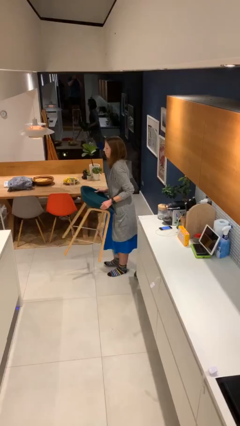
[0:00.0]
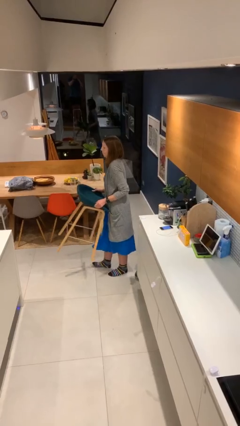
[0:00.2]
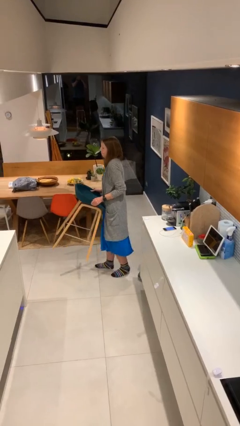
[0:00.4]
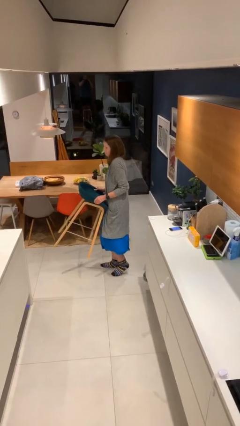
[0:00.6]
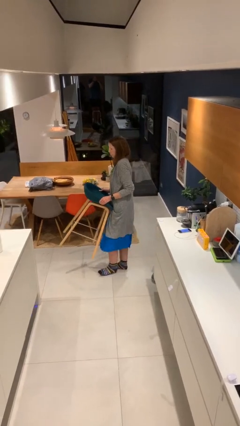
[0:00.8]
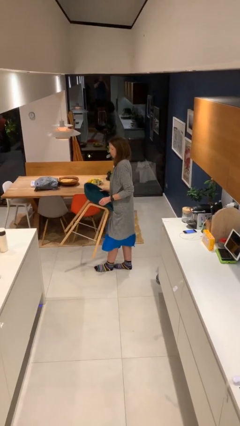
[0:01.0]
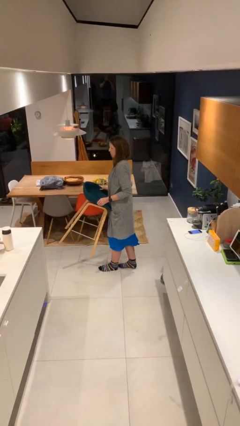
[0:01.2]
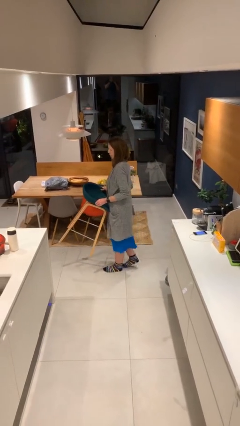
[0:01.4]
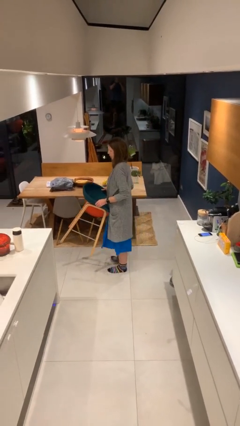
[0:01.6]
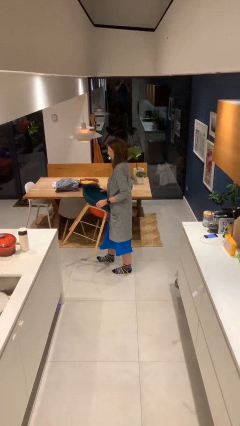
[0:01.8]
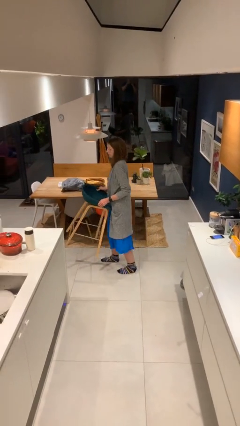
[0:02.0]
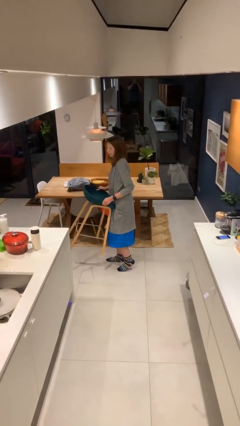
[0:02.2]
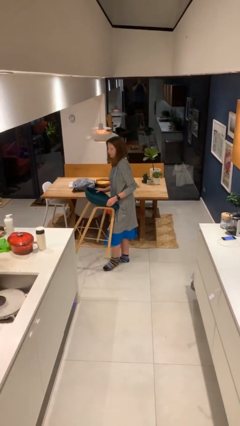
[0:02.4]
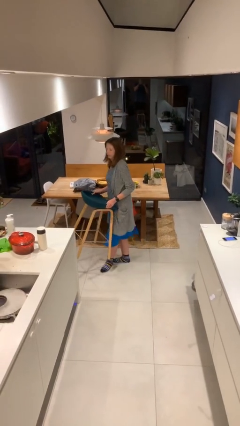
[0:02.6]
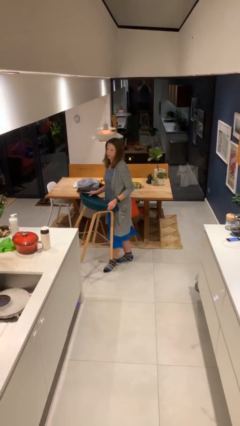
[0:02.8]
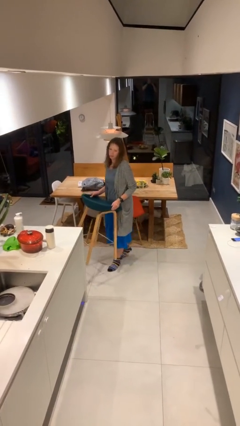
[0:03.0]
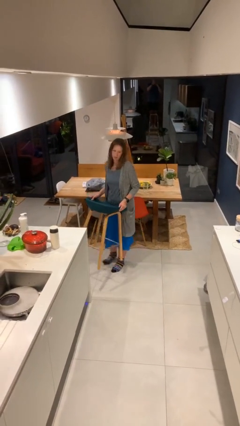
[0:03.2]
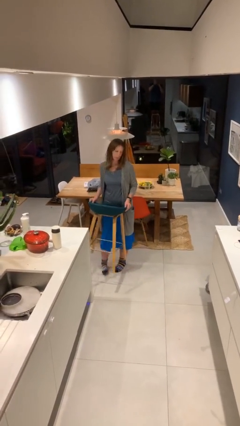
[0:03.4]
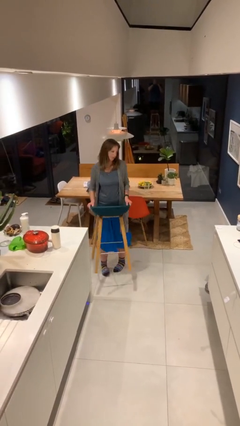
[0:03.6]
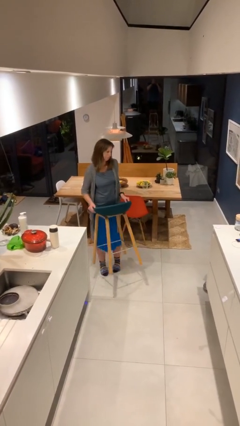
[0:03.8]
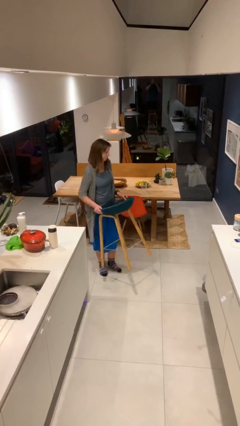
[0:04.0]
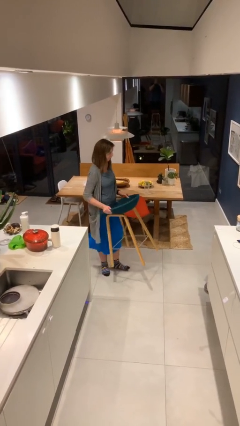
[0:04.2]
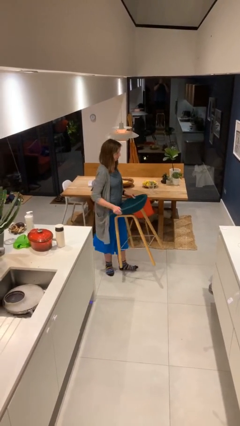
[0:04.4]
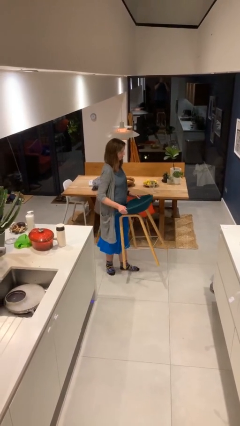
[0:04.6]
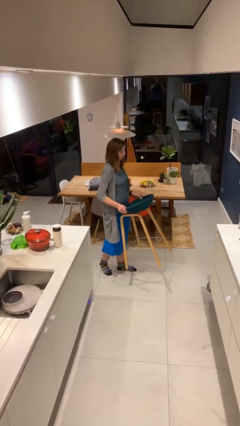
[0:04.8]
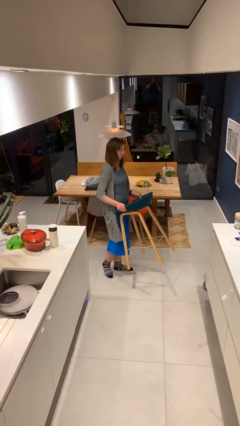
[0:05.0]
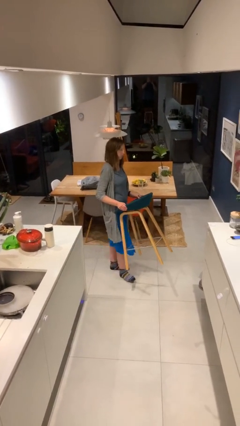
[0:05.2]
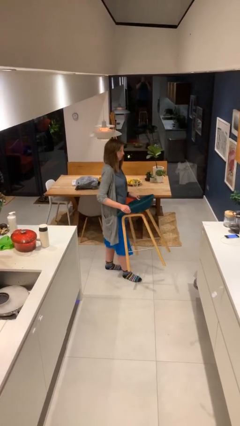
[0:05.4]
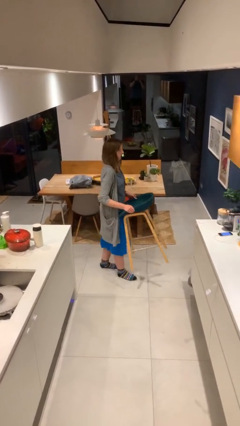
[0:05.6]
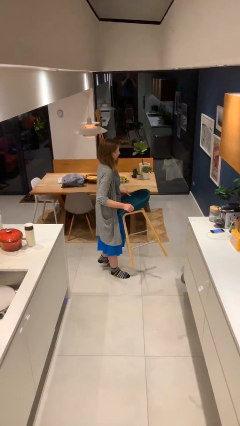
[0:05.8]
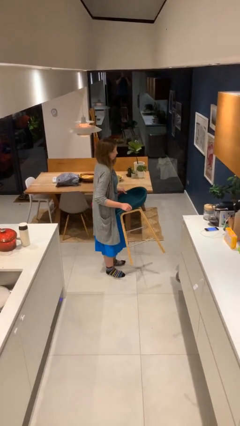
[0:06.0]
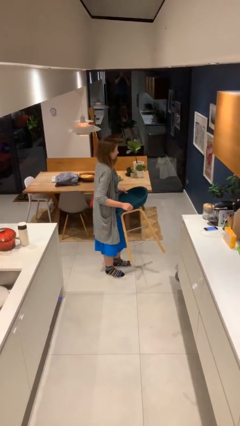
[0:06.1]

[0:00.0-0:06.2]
person carries heavy object

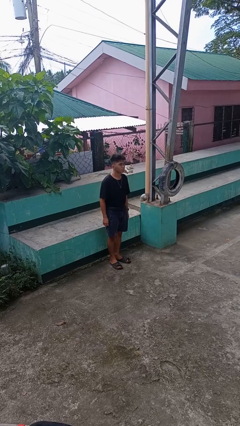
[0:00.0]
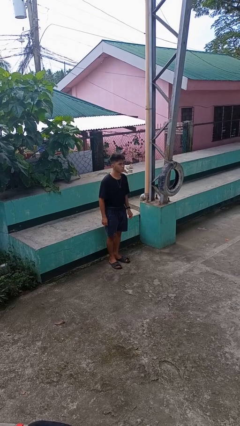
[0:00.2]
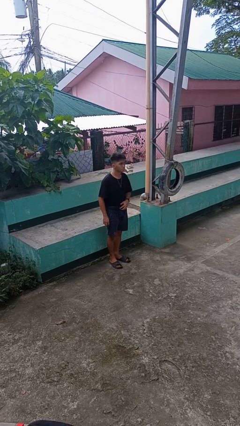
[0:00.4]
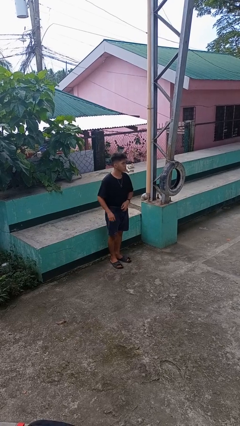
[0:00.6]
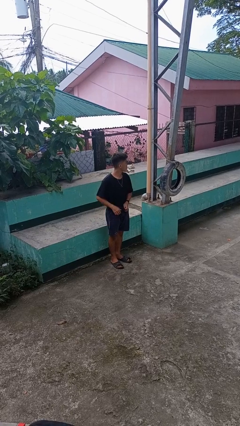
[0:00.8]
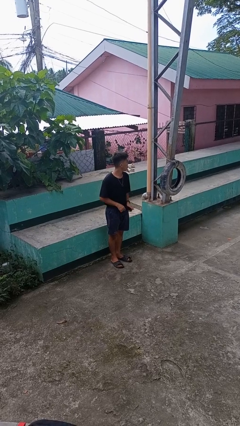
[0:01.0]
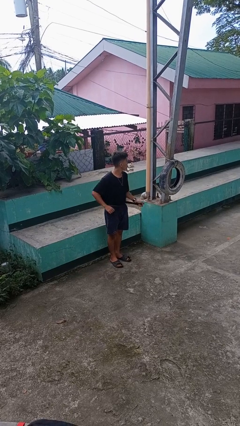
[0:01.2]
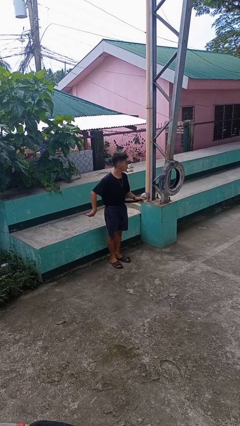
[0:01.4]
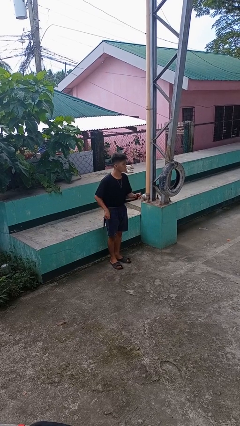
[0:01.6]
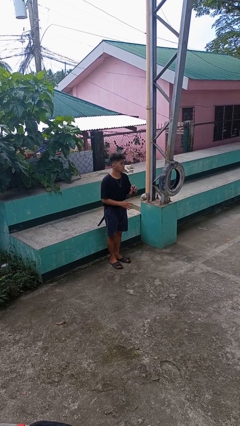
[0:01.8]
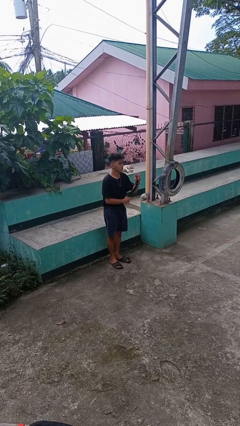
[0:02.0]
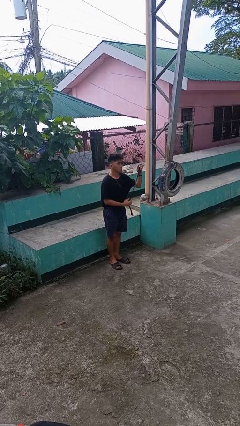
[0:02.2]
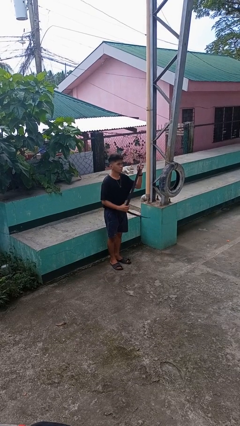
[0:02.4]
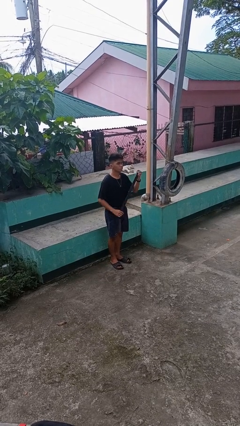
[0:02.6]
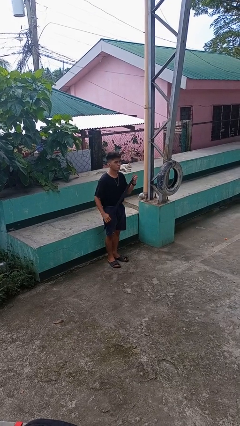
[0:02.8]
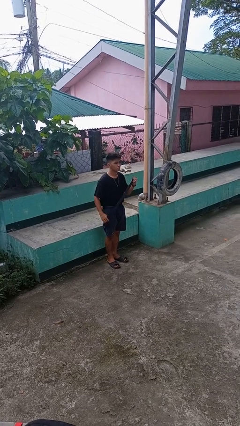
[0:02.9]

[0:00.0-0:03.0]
person takes off belt

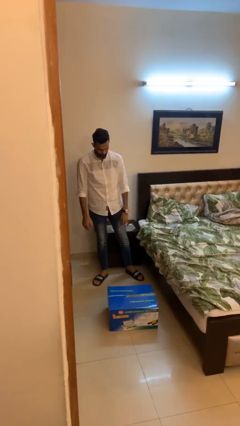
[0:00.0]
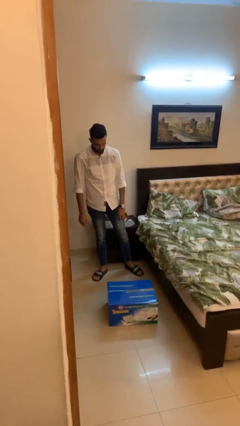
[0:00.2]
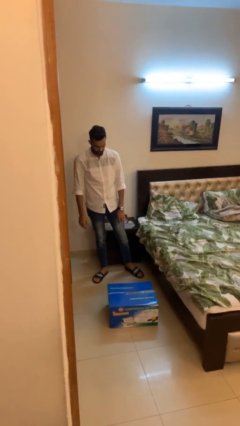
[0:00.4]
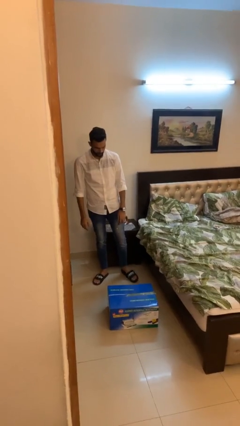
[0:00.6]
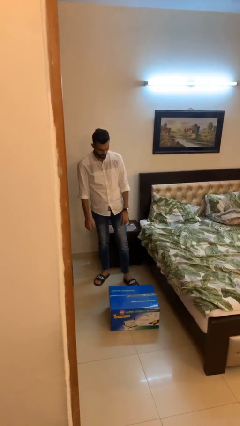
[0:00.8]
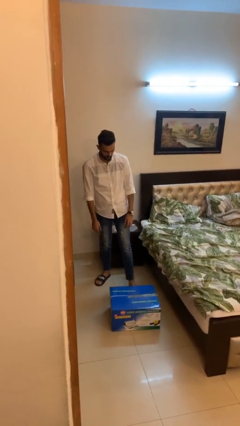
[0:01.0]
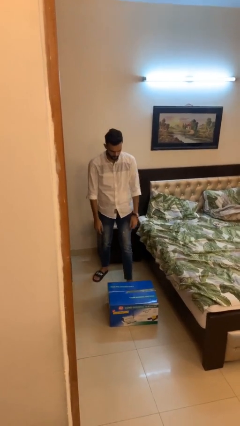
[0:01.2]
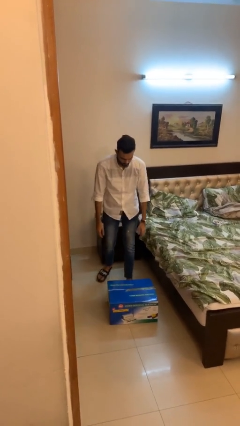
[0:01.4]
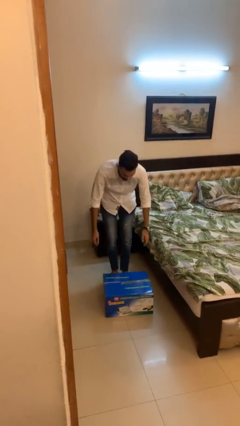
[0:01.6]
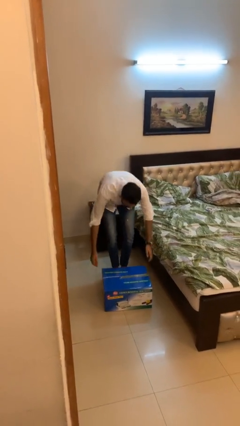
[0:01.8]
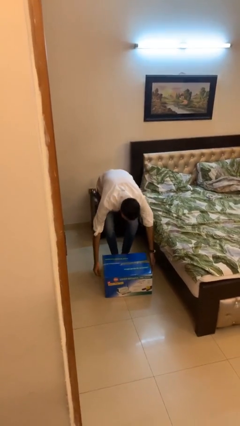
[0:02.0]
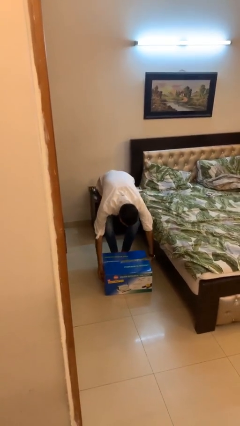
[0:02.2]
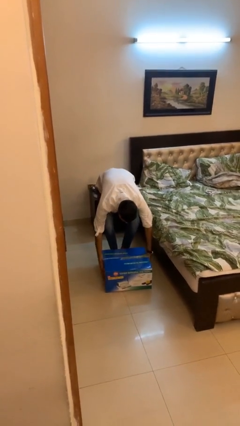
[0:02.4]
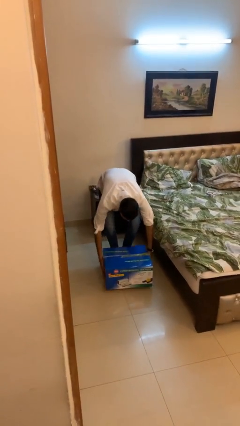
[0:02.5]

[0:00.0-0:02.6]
person picks up object from floor

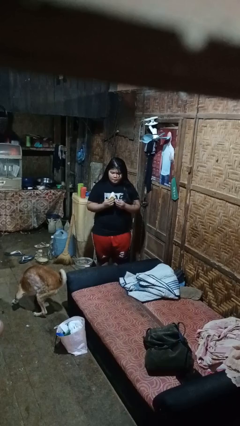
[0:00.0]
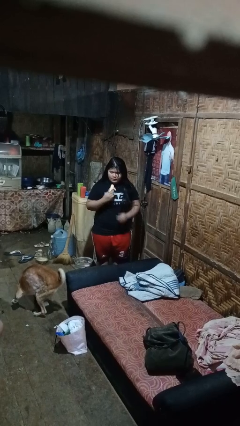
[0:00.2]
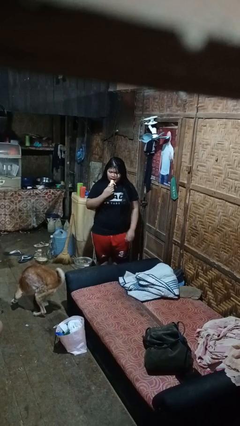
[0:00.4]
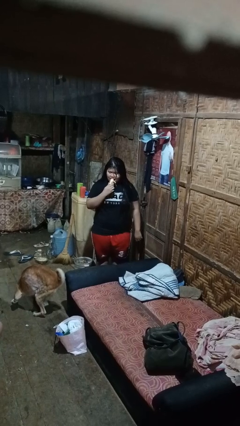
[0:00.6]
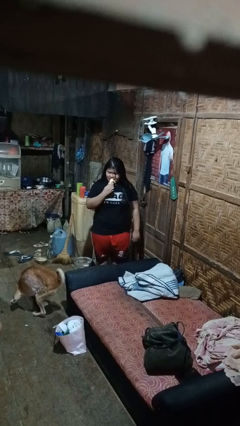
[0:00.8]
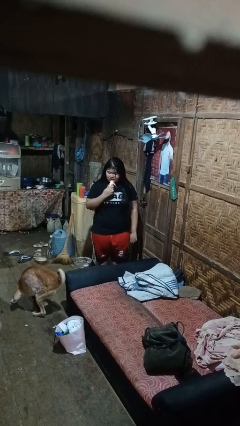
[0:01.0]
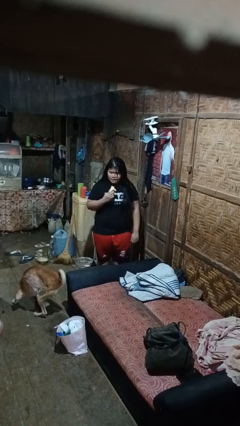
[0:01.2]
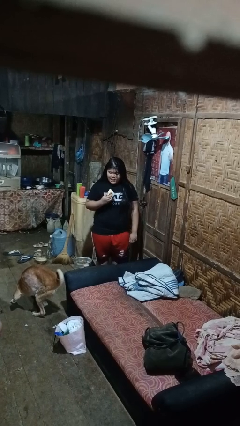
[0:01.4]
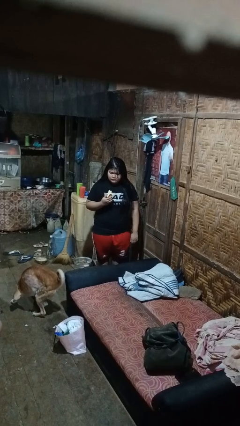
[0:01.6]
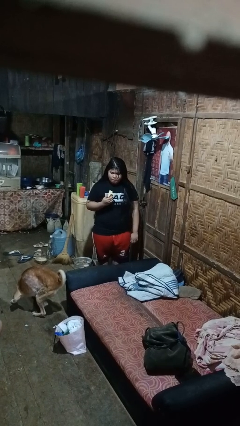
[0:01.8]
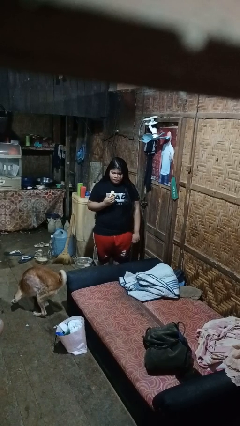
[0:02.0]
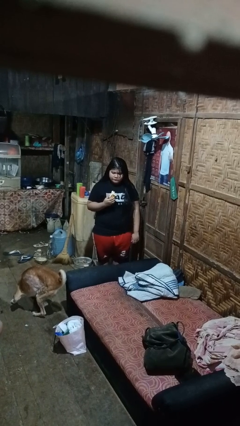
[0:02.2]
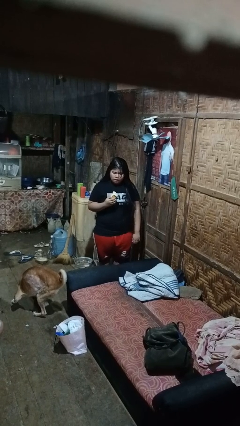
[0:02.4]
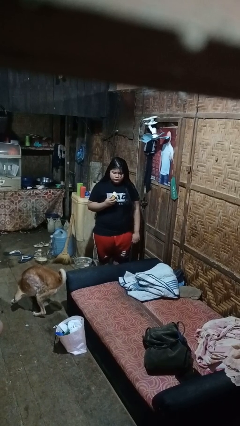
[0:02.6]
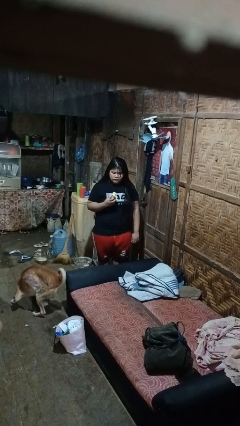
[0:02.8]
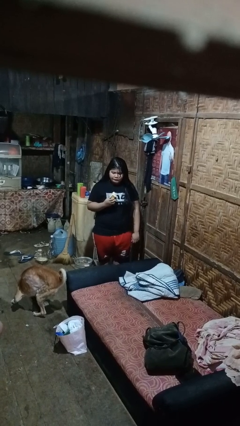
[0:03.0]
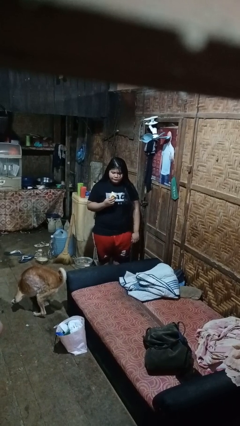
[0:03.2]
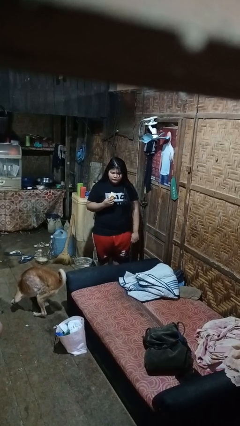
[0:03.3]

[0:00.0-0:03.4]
person eats banana

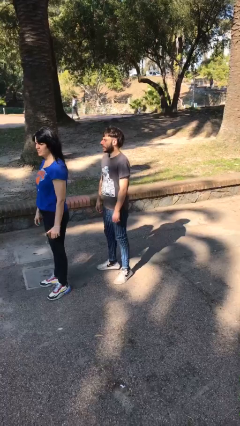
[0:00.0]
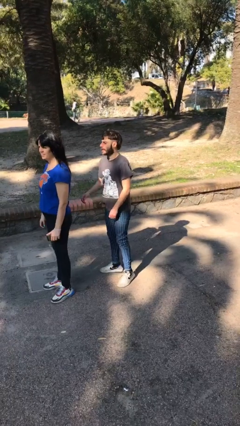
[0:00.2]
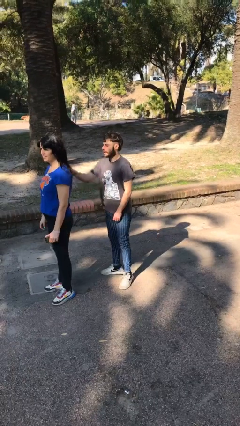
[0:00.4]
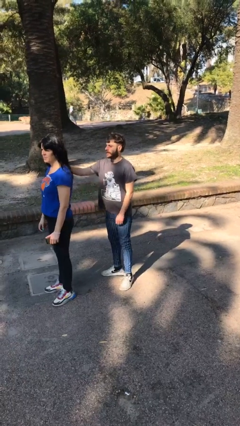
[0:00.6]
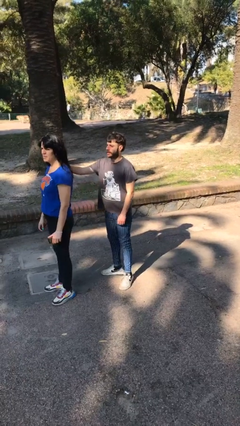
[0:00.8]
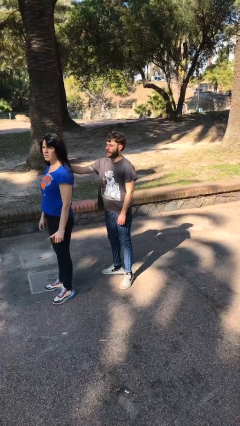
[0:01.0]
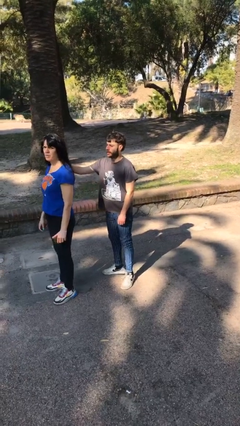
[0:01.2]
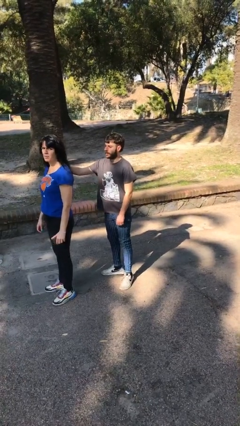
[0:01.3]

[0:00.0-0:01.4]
person grabs person by shoulder

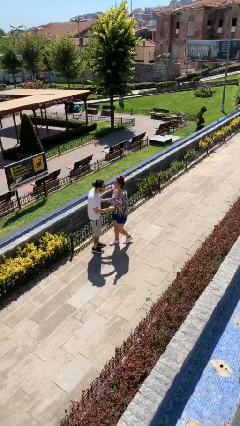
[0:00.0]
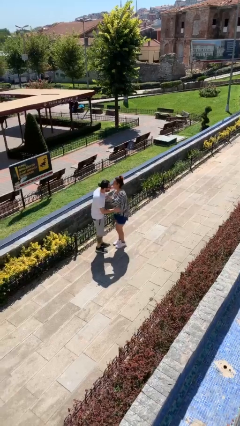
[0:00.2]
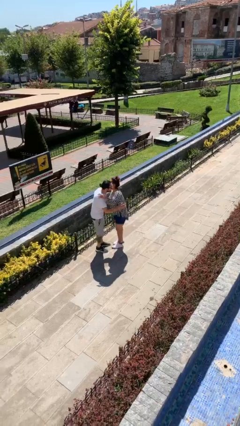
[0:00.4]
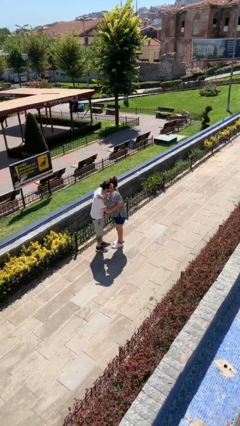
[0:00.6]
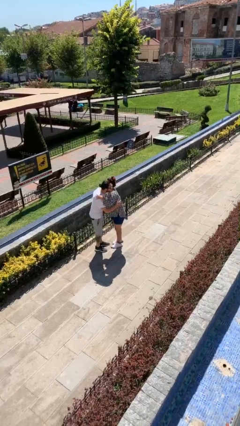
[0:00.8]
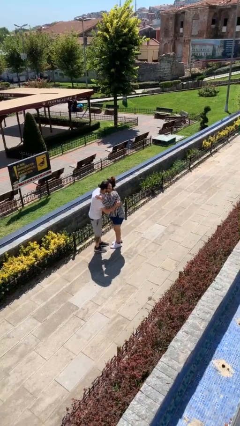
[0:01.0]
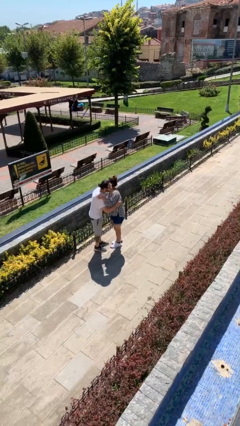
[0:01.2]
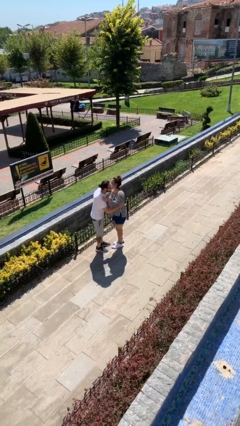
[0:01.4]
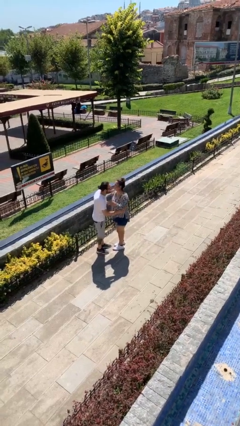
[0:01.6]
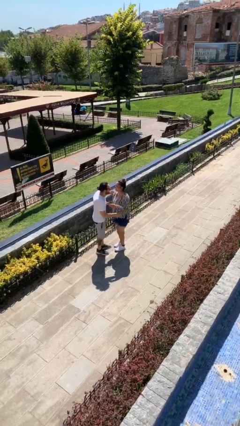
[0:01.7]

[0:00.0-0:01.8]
person embraces person
